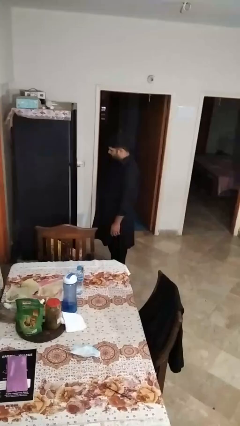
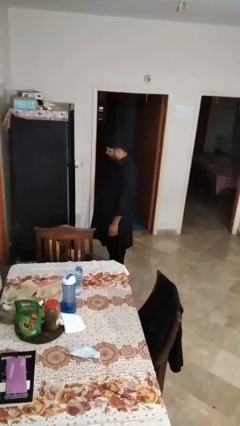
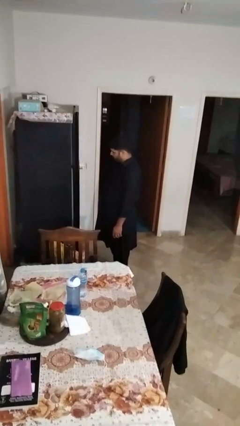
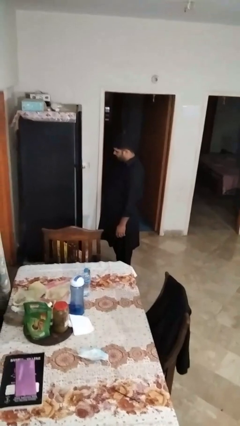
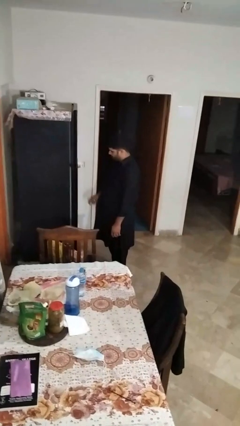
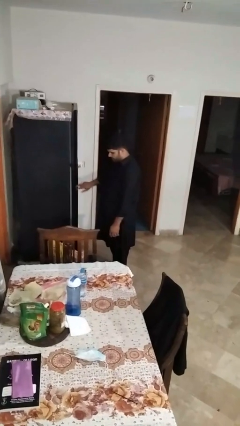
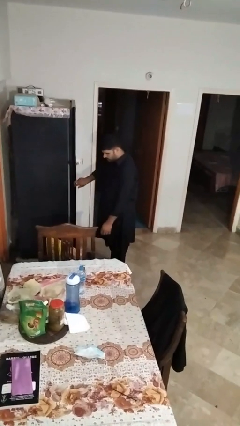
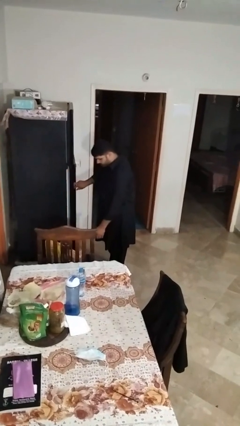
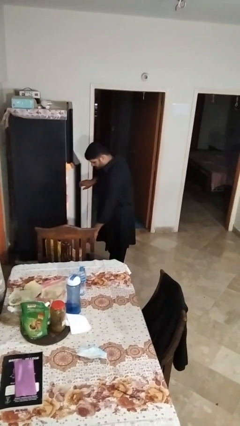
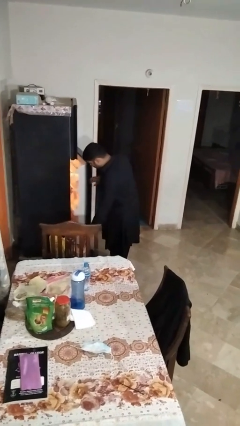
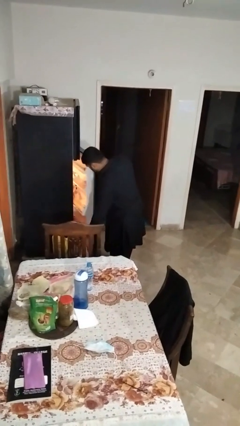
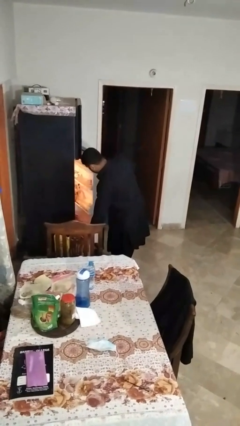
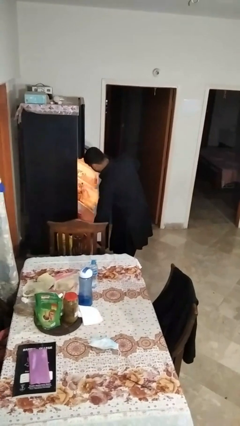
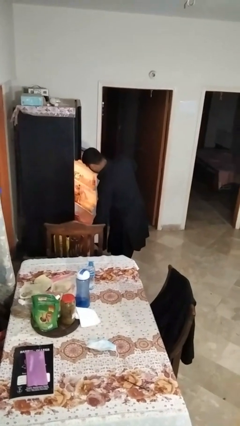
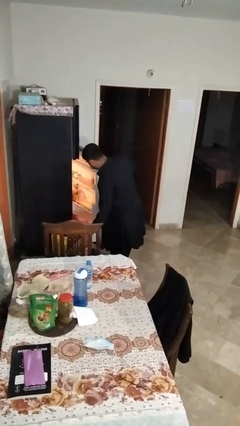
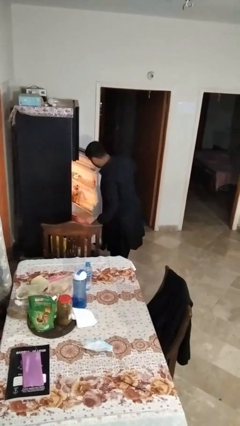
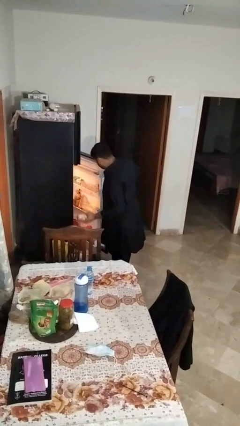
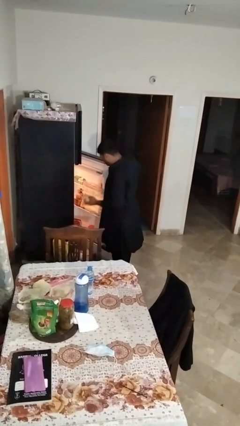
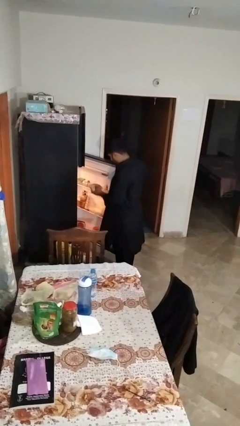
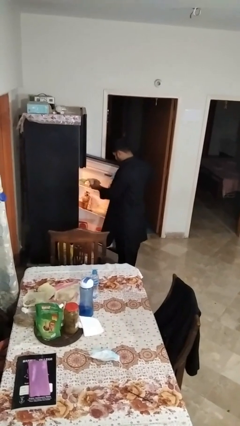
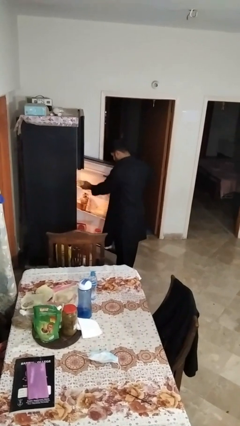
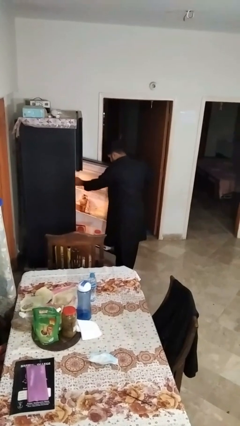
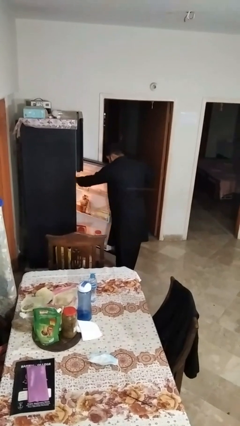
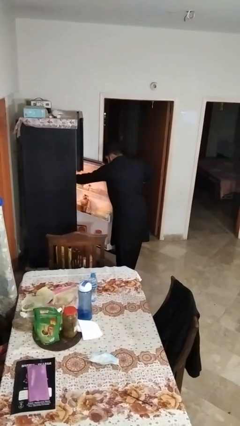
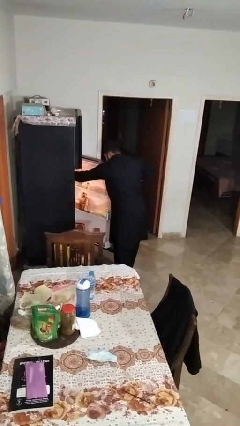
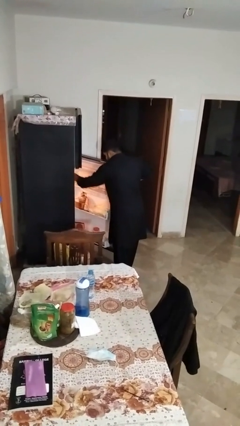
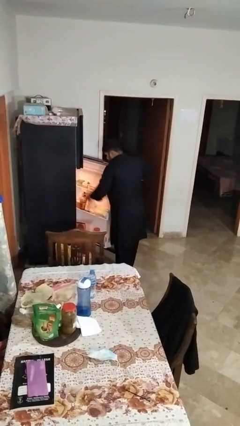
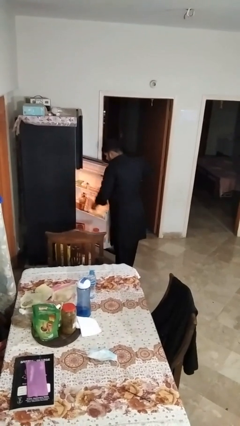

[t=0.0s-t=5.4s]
person loads groceries into refrigerator

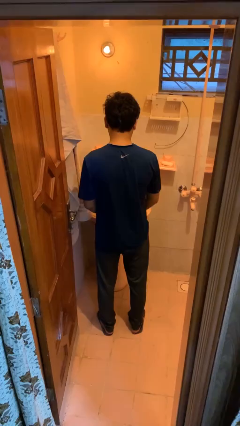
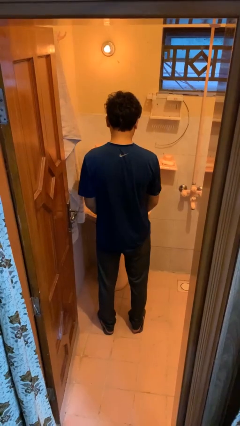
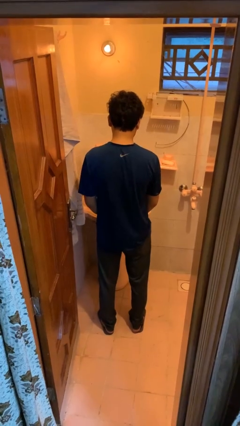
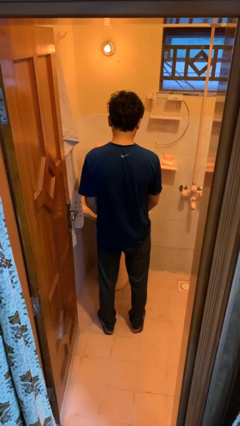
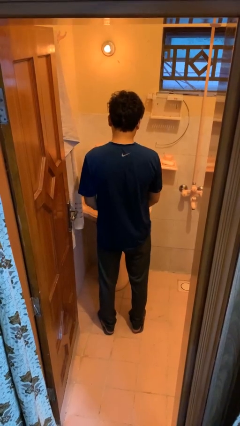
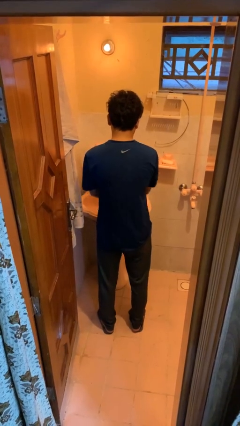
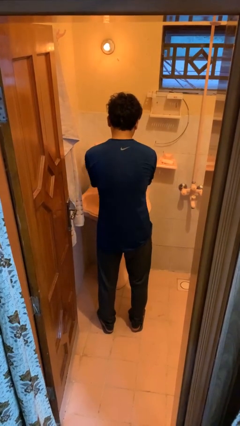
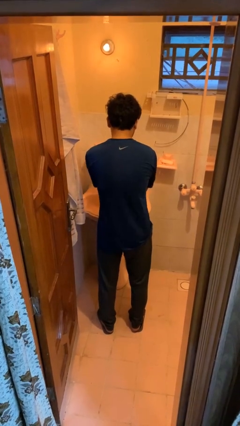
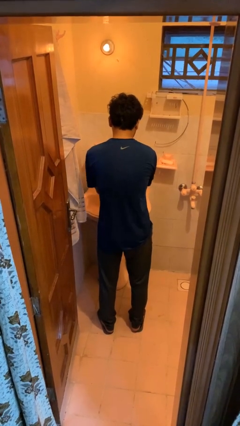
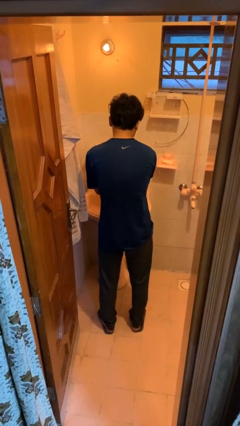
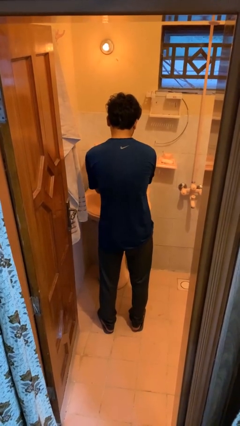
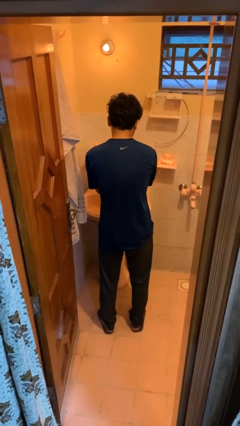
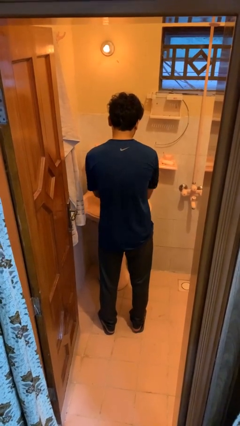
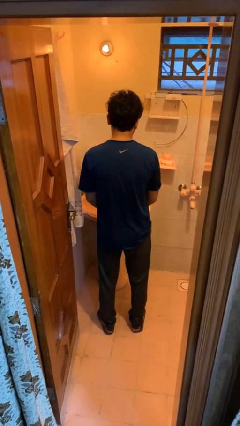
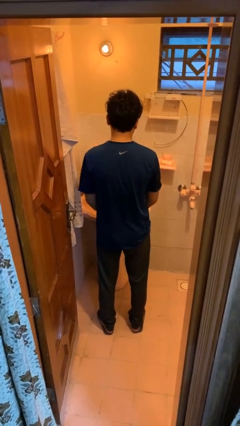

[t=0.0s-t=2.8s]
person washes hands

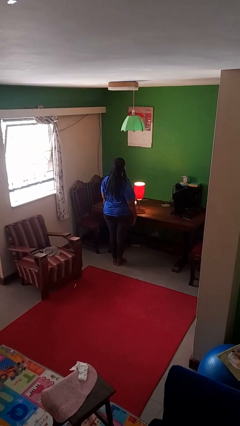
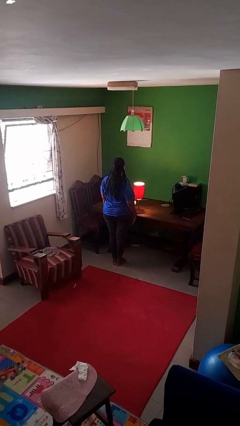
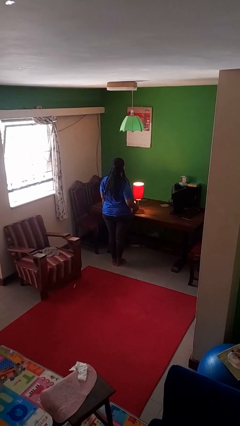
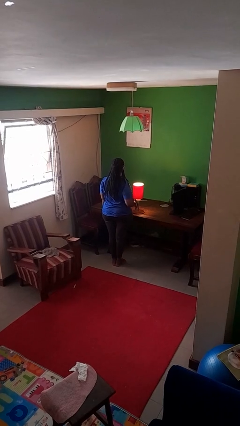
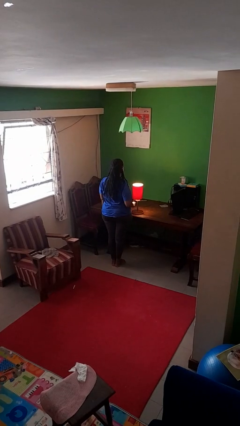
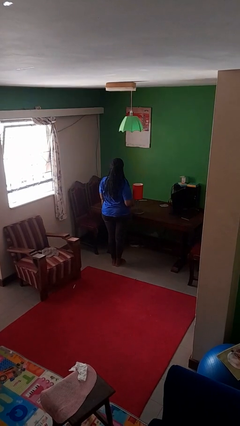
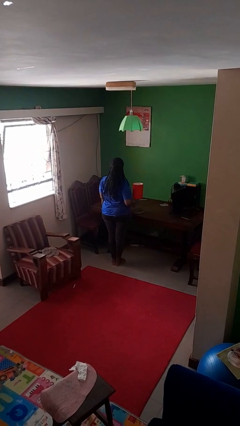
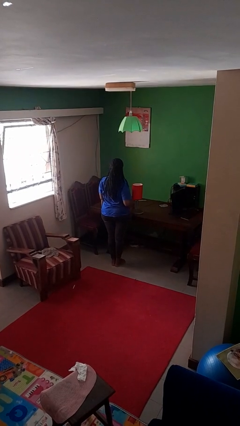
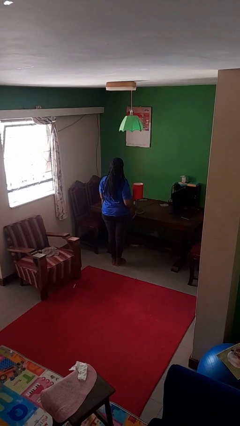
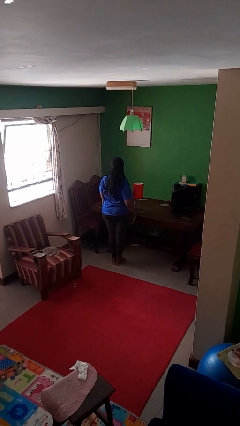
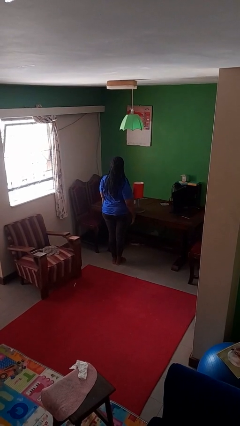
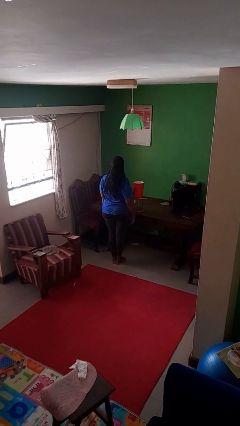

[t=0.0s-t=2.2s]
person turns off lamp

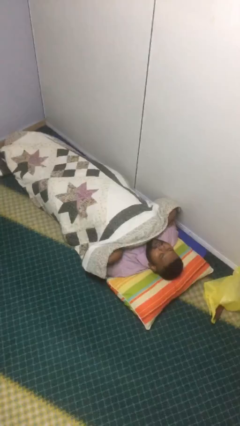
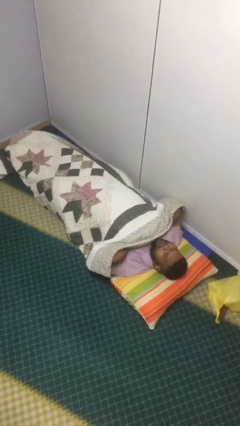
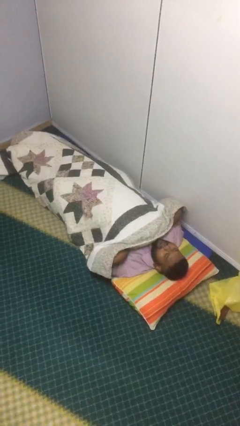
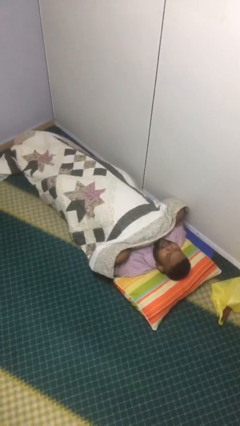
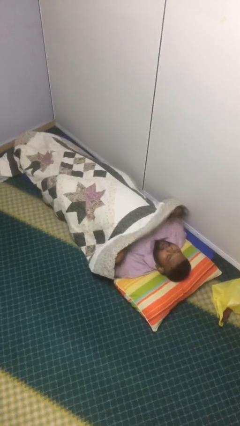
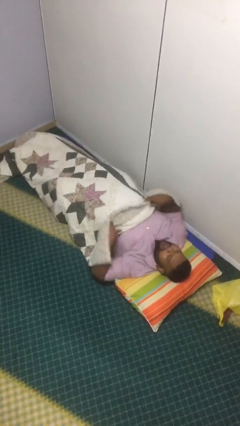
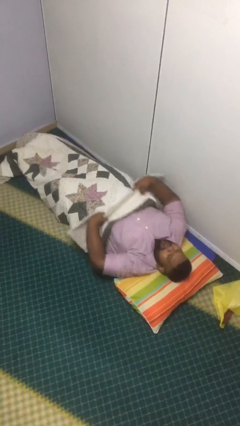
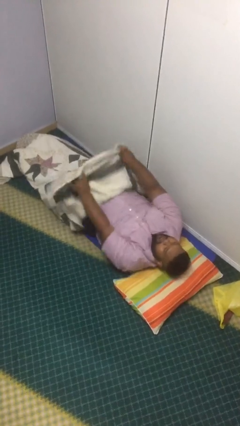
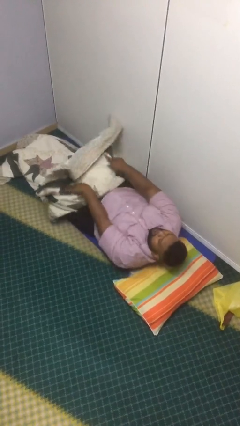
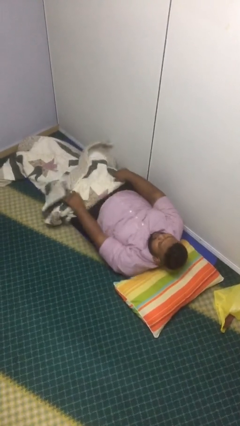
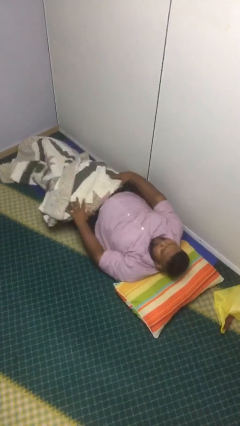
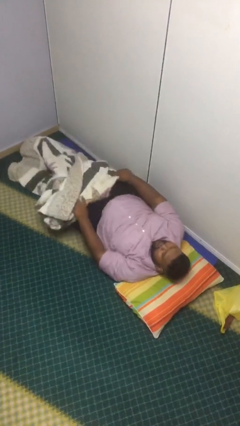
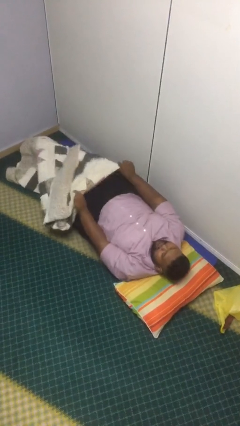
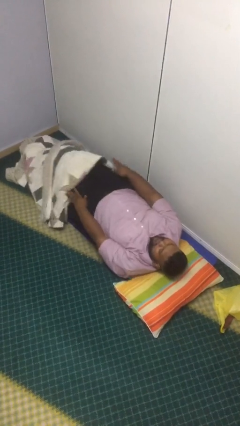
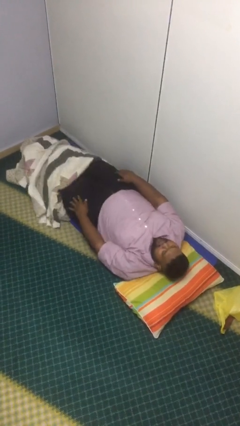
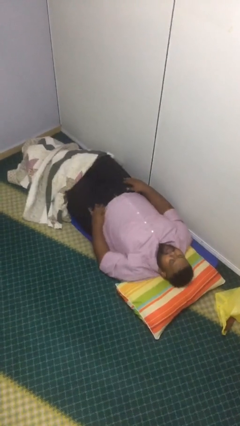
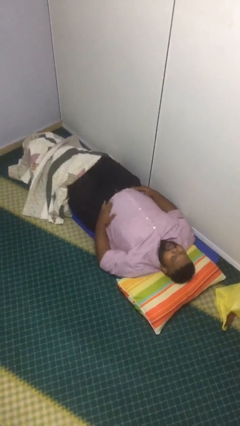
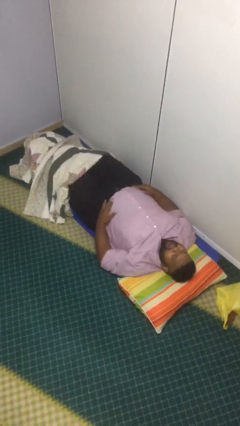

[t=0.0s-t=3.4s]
person uncovers with bedsheets

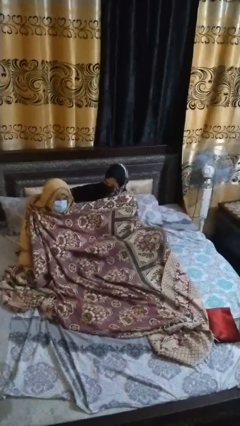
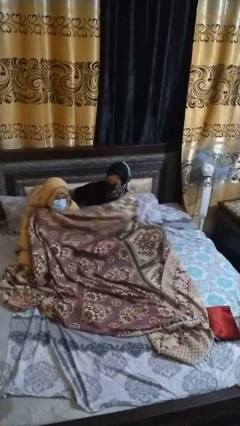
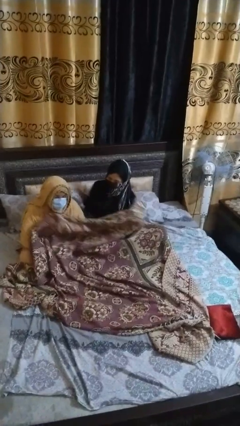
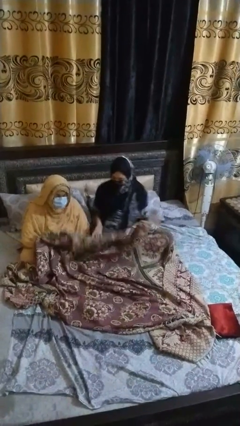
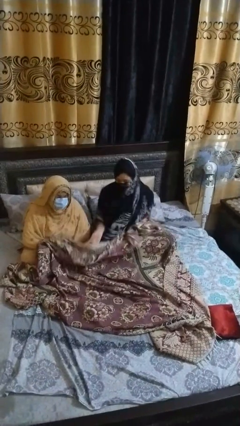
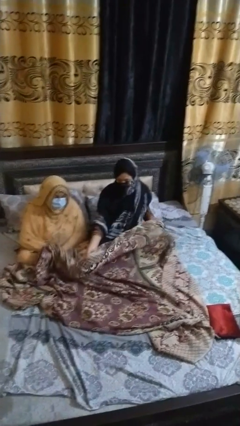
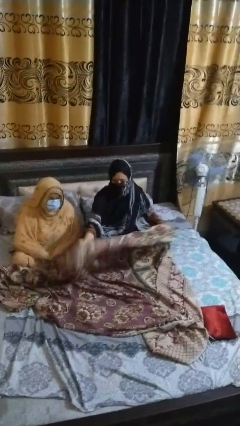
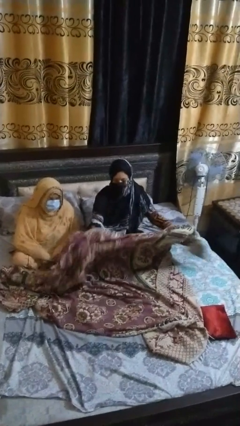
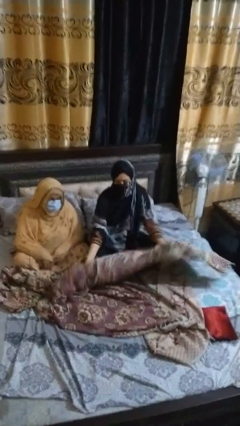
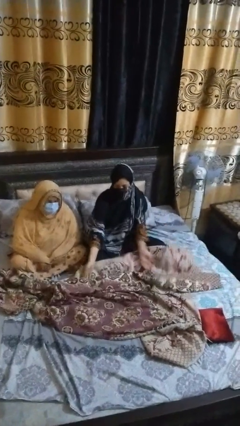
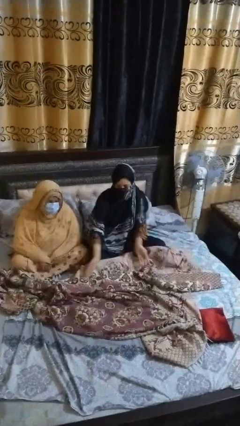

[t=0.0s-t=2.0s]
person uncovers friend with blanket

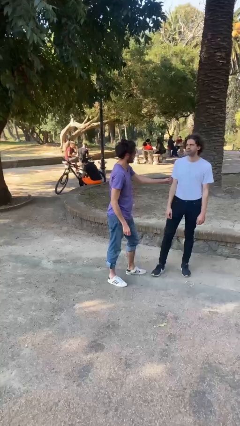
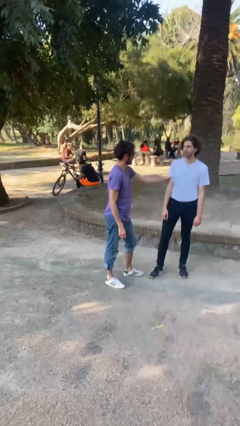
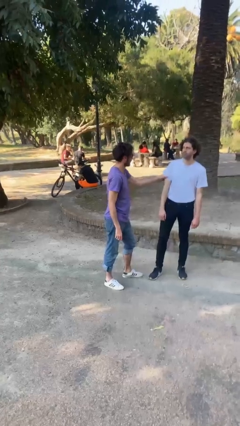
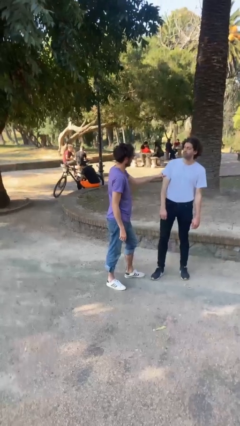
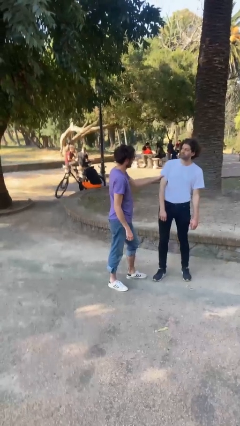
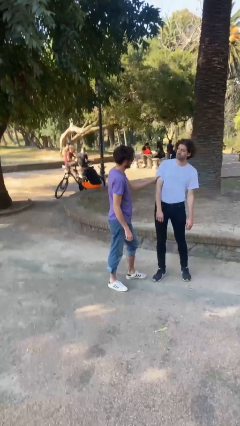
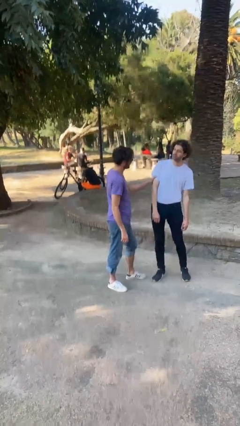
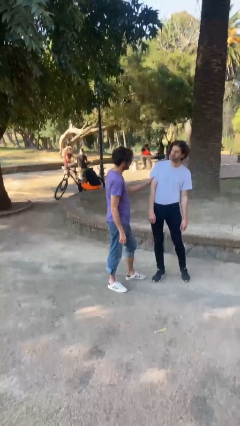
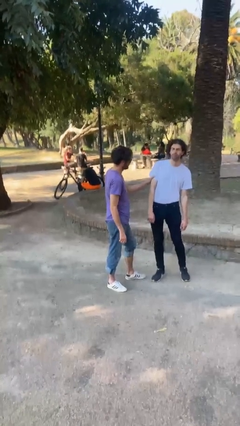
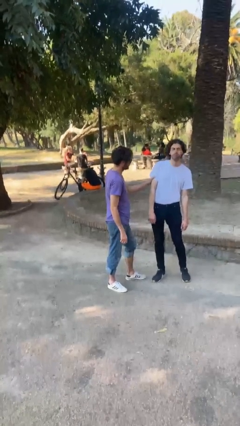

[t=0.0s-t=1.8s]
person grabs person by bicep
